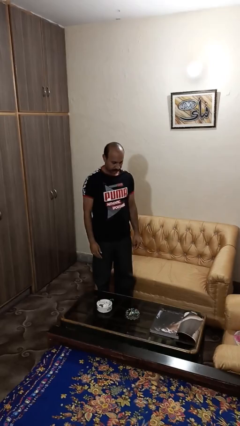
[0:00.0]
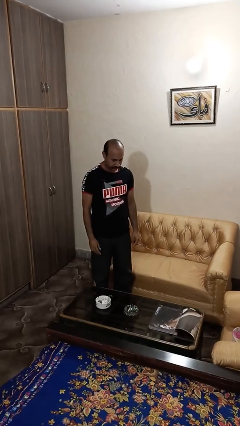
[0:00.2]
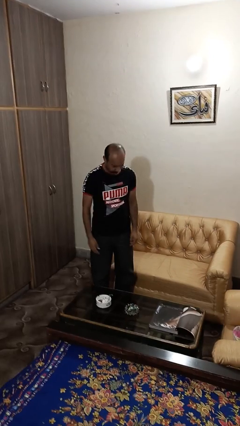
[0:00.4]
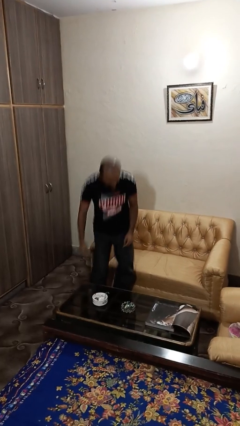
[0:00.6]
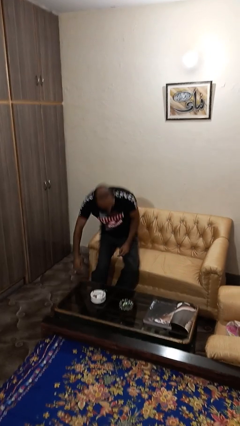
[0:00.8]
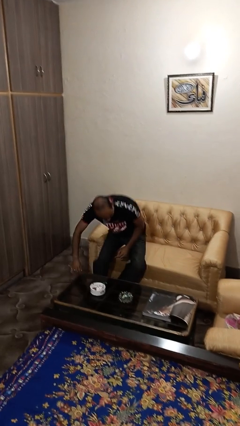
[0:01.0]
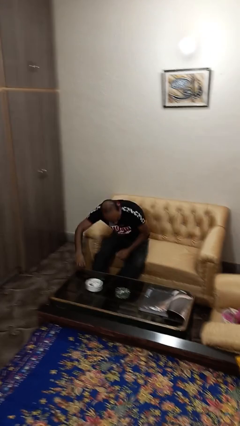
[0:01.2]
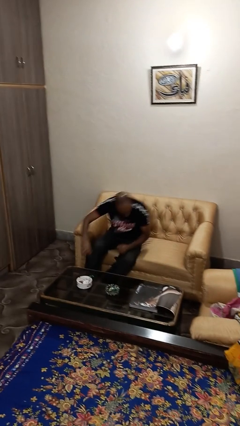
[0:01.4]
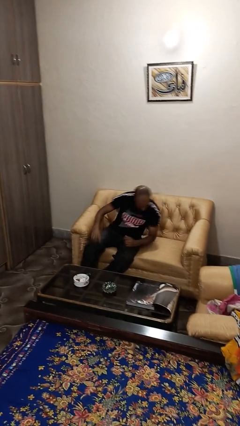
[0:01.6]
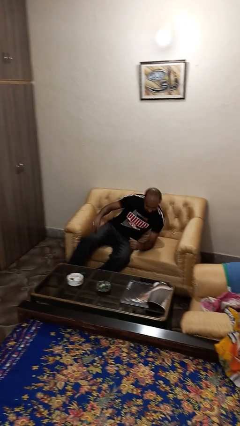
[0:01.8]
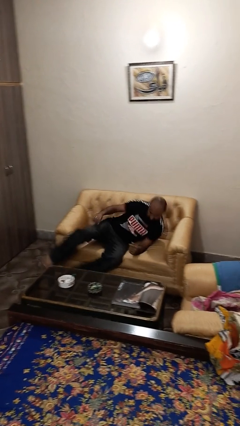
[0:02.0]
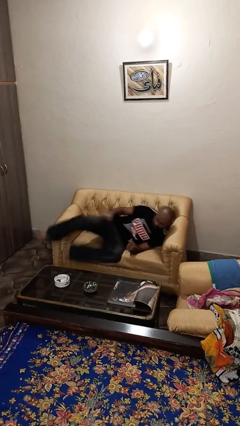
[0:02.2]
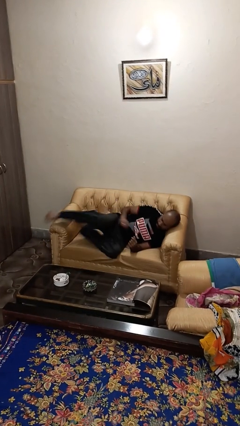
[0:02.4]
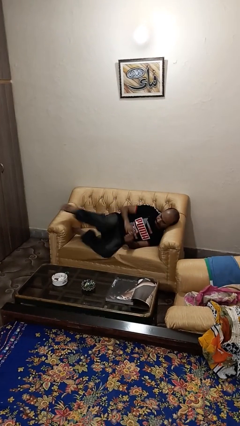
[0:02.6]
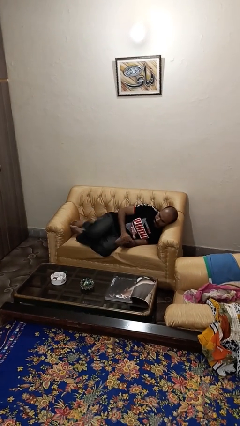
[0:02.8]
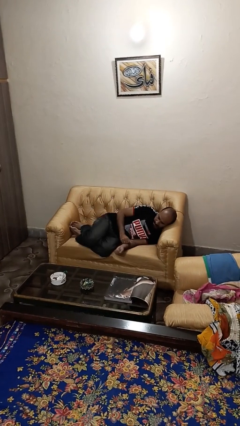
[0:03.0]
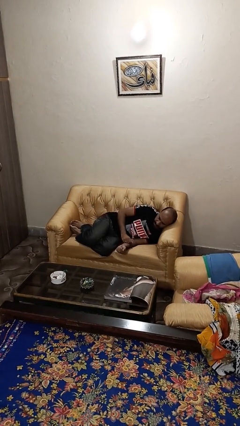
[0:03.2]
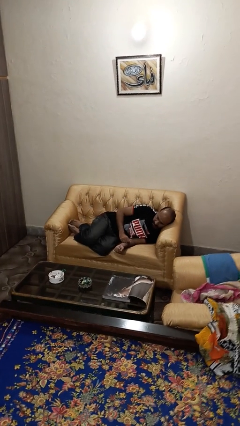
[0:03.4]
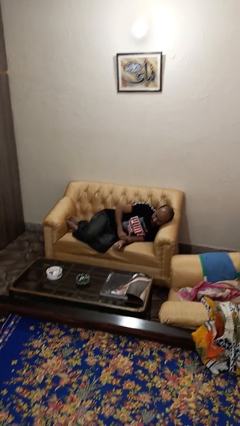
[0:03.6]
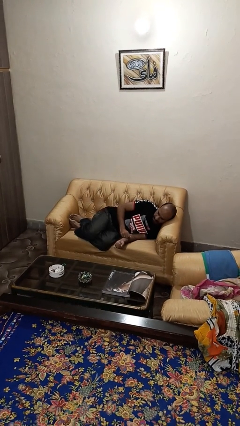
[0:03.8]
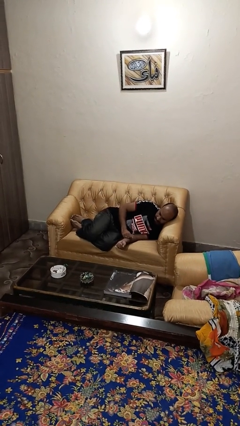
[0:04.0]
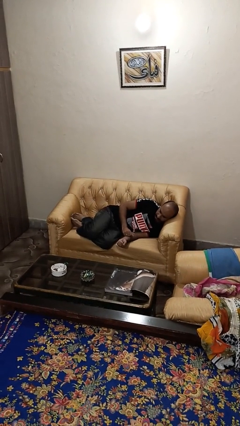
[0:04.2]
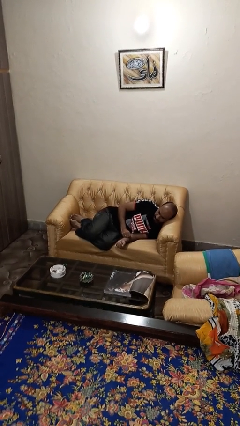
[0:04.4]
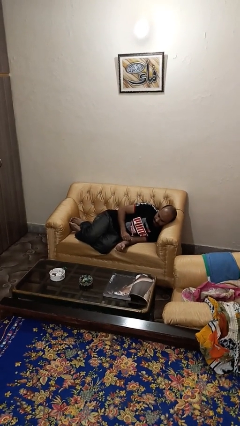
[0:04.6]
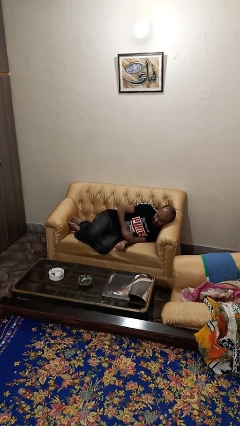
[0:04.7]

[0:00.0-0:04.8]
person lies down on couch

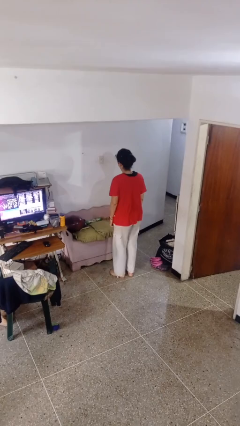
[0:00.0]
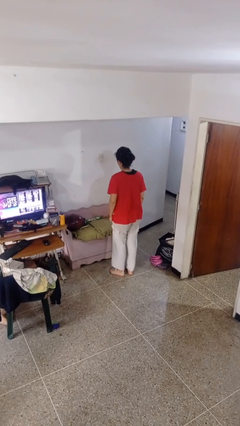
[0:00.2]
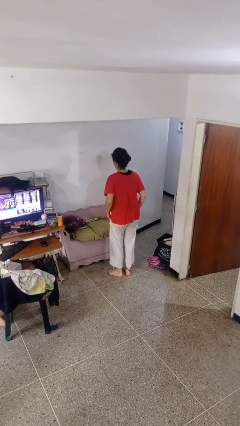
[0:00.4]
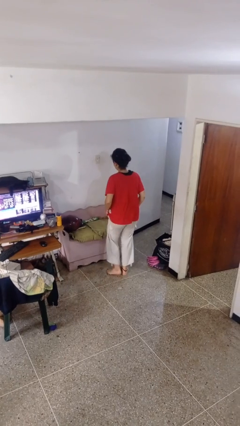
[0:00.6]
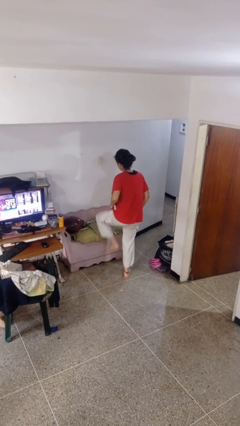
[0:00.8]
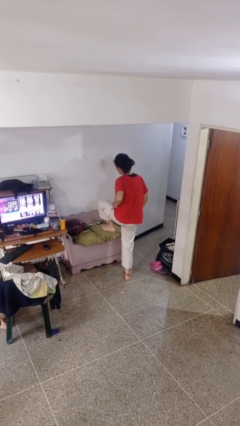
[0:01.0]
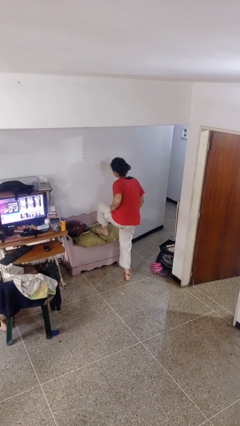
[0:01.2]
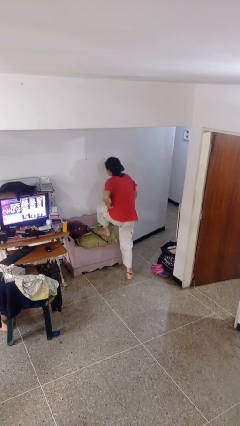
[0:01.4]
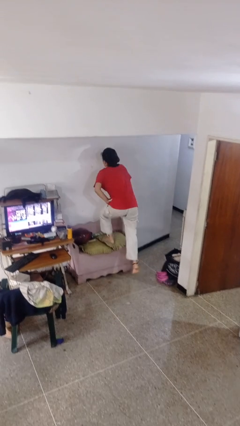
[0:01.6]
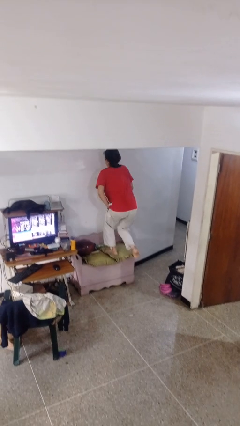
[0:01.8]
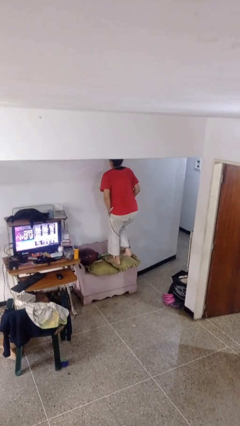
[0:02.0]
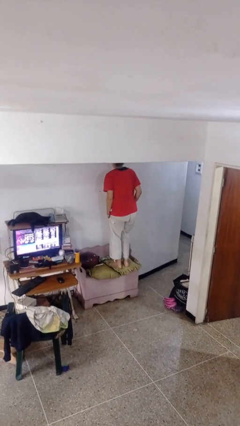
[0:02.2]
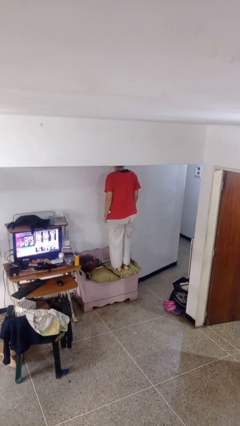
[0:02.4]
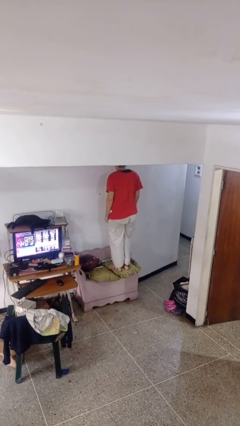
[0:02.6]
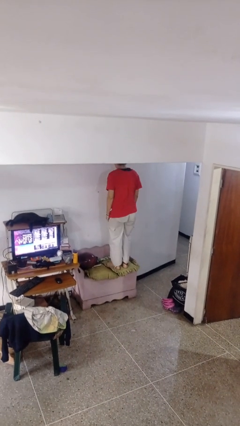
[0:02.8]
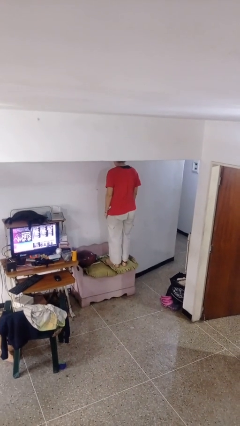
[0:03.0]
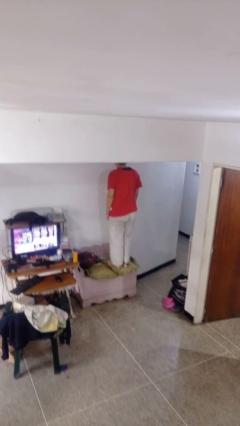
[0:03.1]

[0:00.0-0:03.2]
person climbs on couch

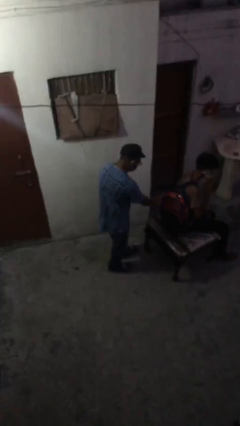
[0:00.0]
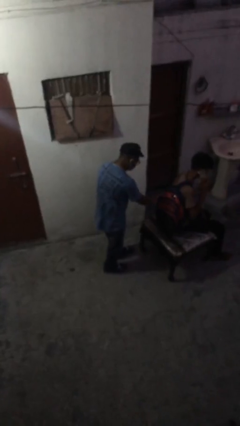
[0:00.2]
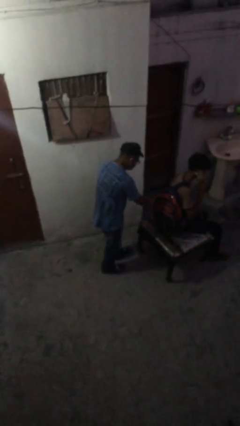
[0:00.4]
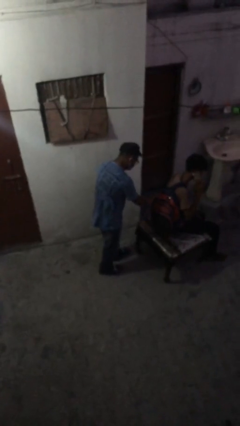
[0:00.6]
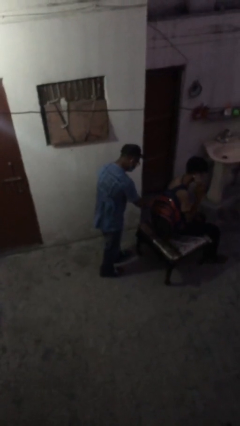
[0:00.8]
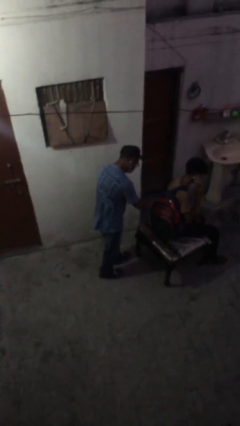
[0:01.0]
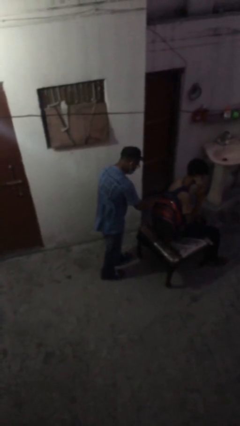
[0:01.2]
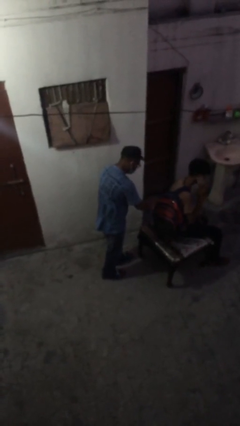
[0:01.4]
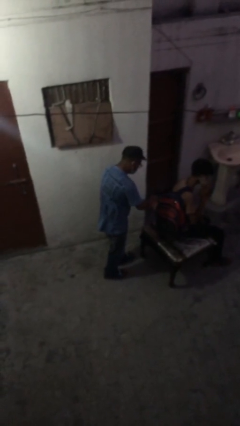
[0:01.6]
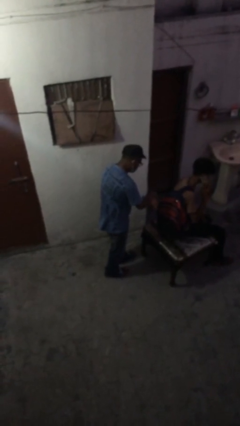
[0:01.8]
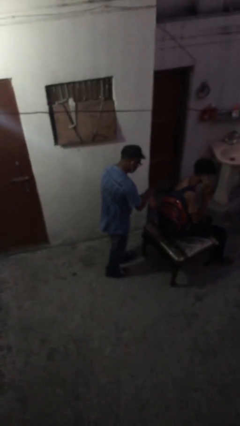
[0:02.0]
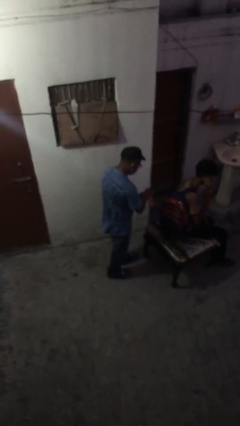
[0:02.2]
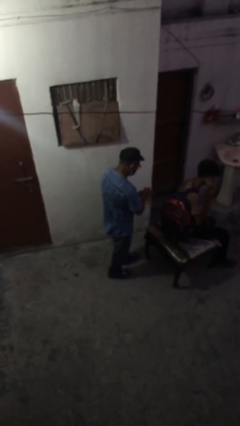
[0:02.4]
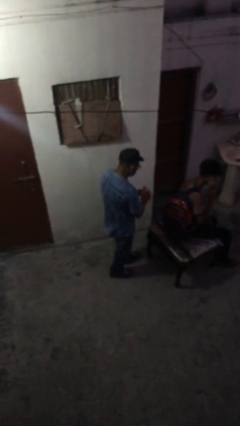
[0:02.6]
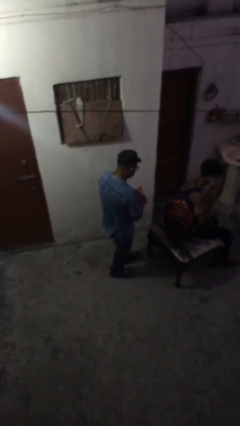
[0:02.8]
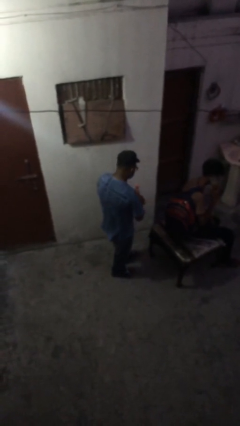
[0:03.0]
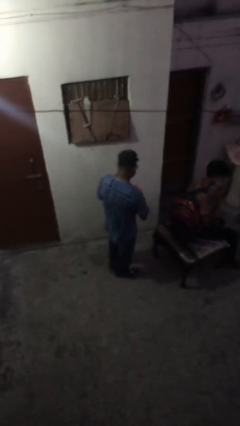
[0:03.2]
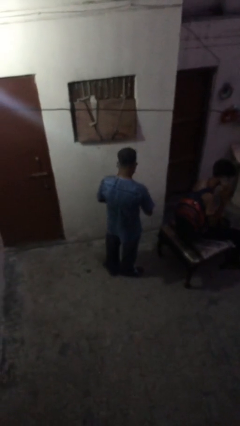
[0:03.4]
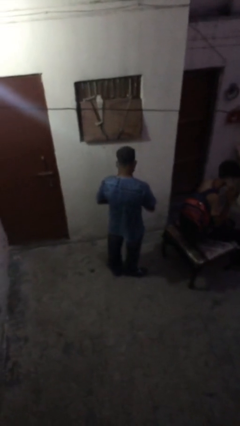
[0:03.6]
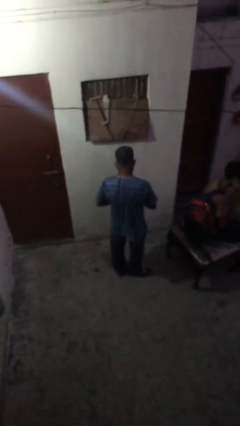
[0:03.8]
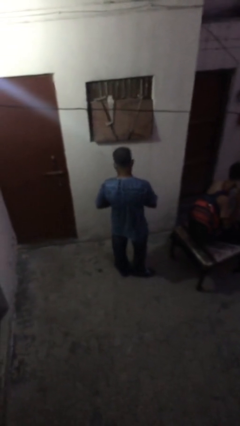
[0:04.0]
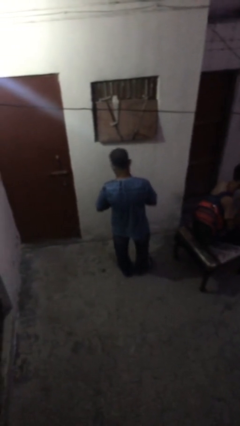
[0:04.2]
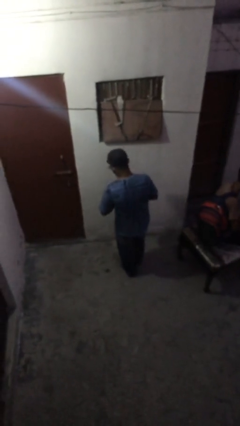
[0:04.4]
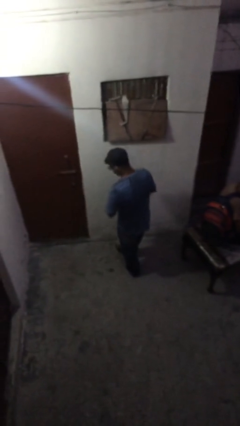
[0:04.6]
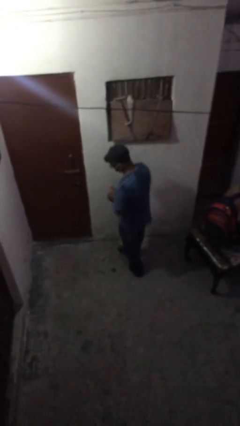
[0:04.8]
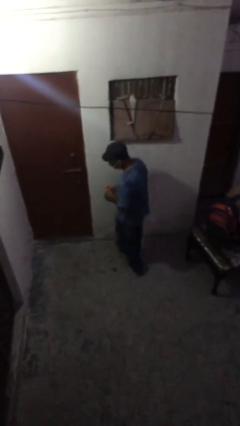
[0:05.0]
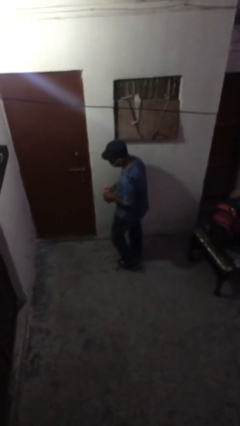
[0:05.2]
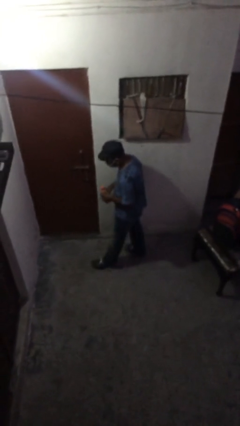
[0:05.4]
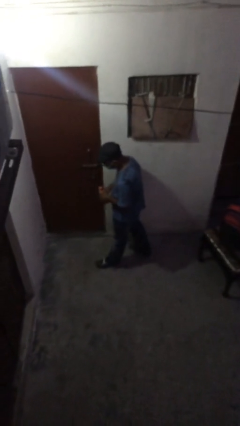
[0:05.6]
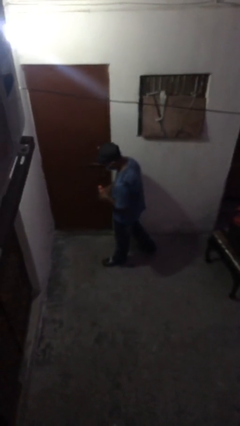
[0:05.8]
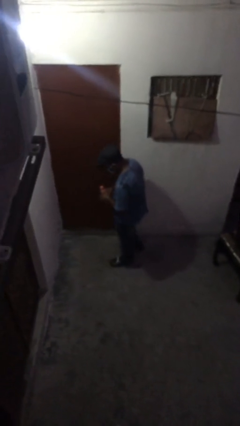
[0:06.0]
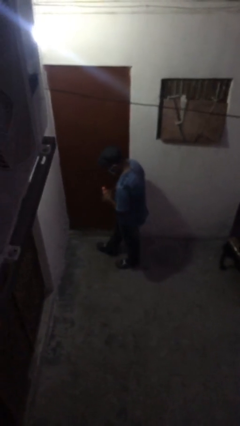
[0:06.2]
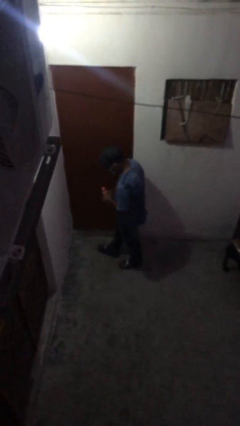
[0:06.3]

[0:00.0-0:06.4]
person steals object from person

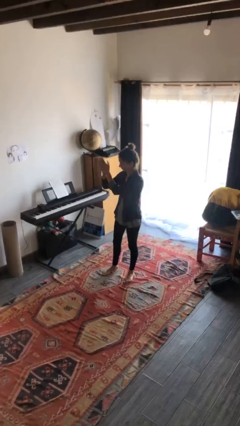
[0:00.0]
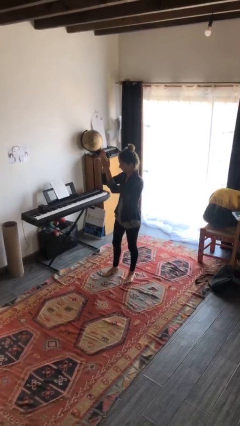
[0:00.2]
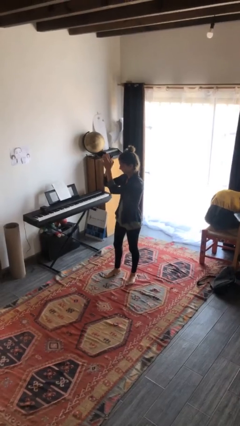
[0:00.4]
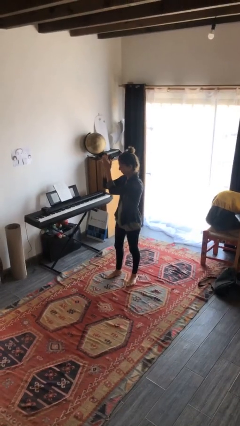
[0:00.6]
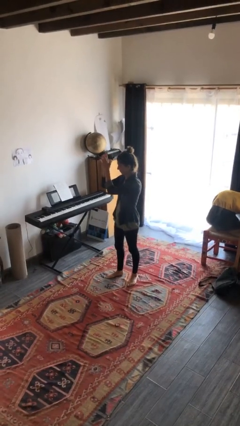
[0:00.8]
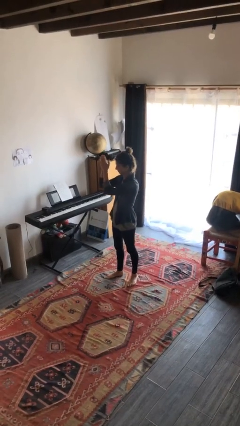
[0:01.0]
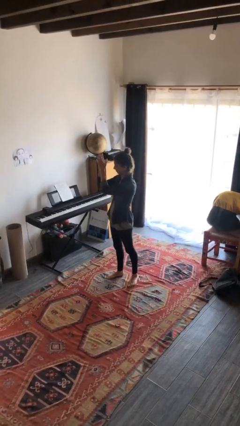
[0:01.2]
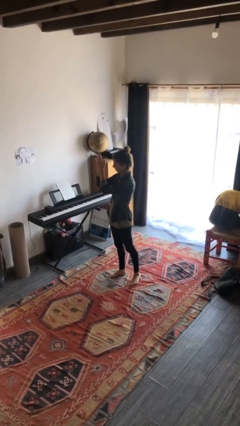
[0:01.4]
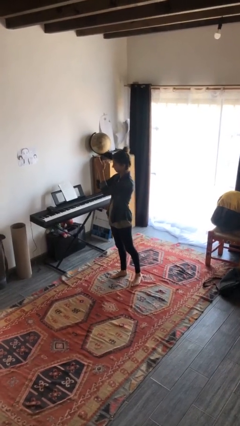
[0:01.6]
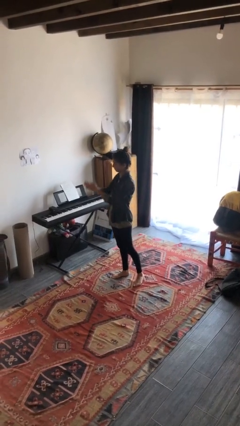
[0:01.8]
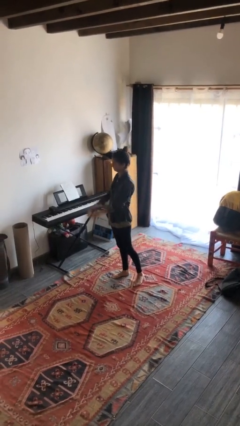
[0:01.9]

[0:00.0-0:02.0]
person claps hands

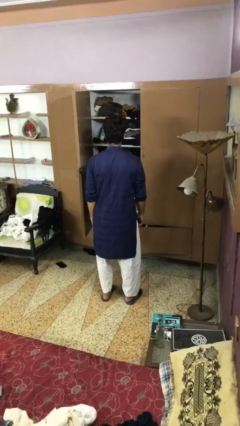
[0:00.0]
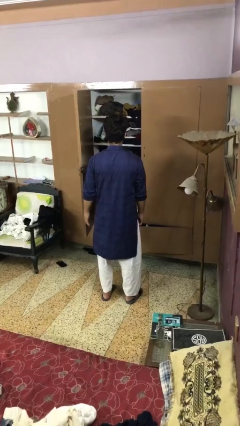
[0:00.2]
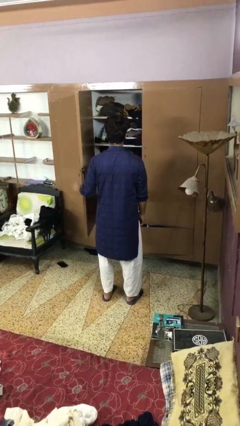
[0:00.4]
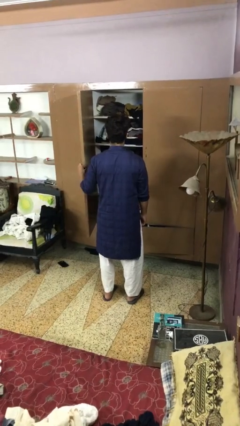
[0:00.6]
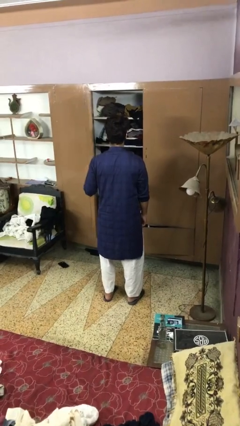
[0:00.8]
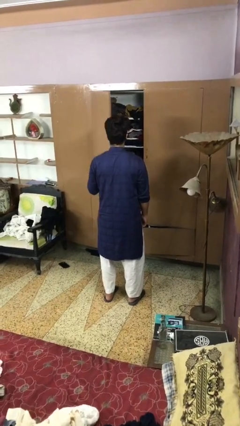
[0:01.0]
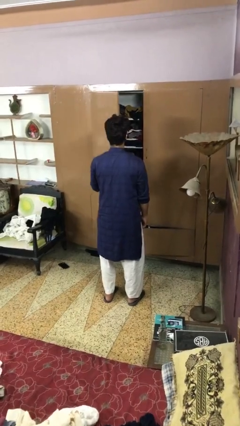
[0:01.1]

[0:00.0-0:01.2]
person closes closet door
